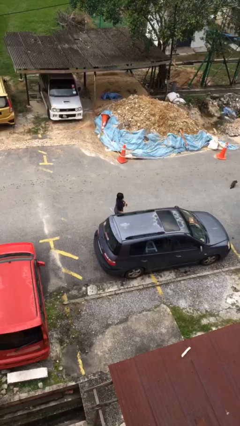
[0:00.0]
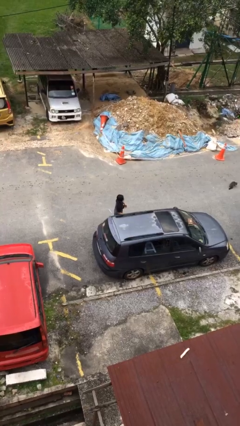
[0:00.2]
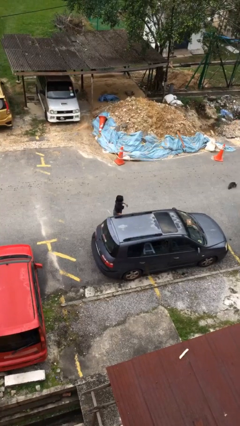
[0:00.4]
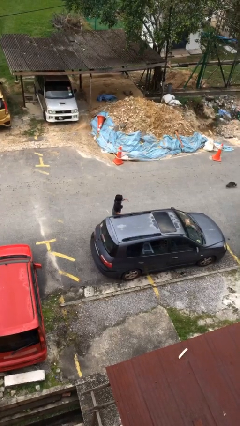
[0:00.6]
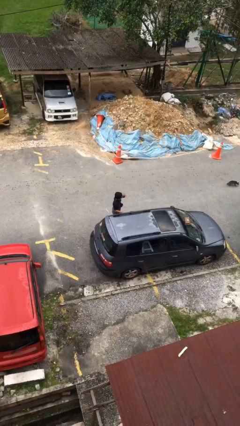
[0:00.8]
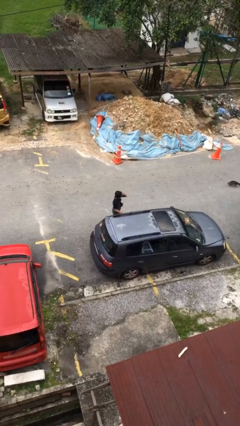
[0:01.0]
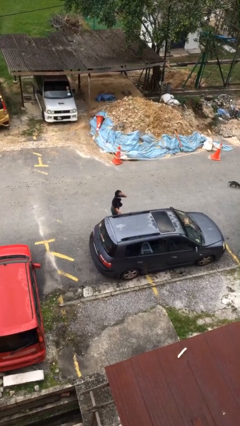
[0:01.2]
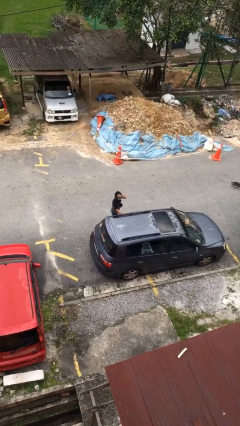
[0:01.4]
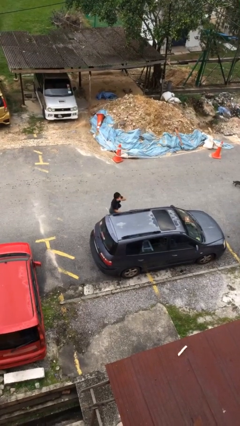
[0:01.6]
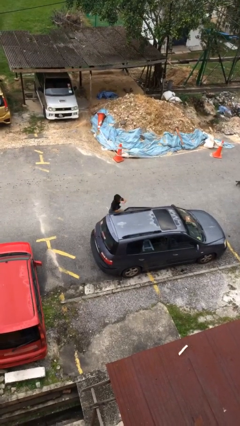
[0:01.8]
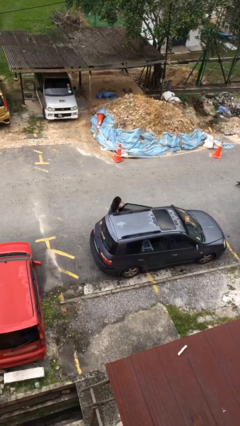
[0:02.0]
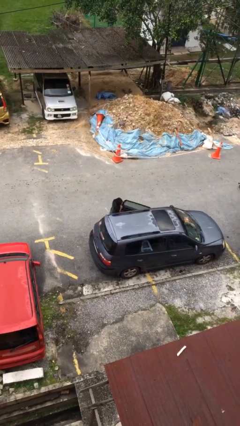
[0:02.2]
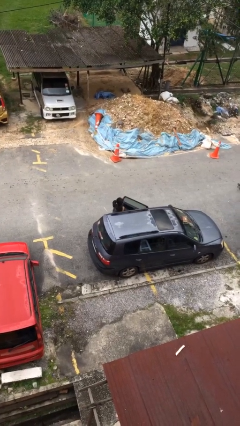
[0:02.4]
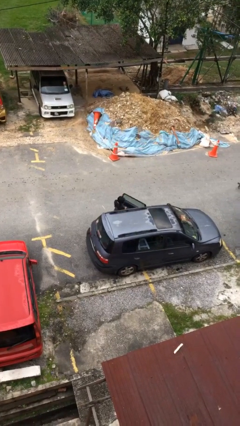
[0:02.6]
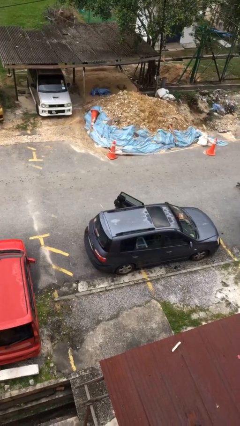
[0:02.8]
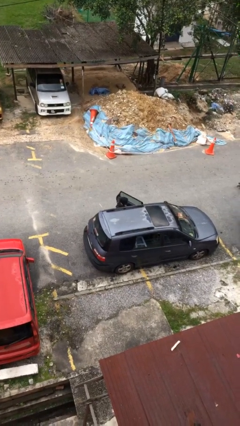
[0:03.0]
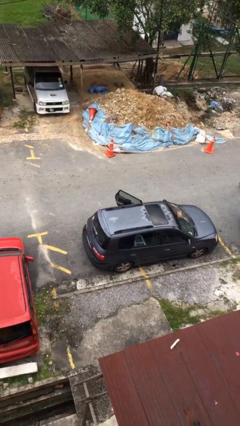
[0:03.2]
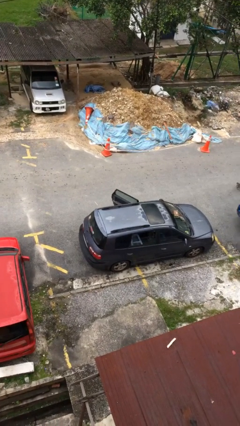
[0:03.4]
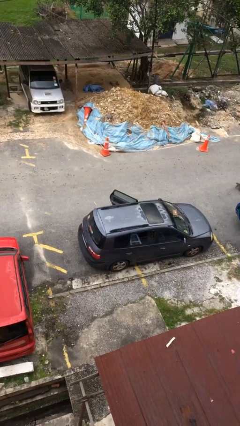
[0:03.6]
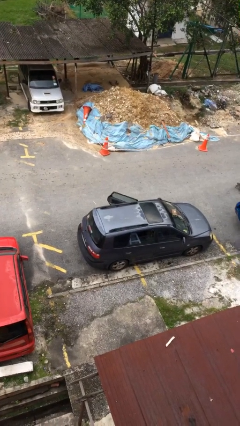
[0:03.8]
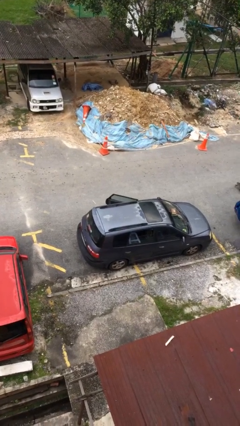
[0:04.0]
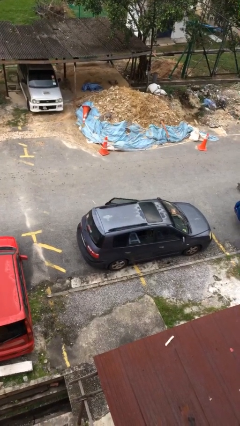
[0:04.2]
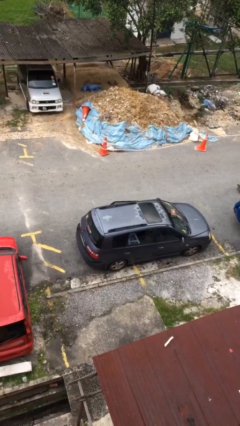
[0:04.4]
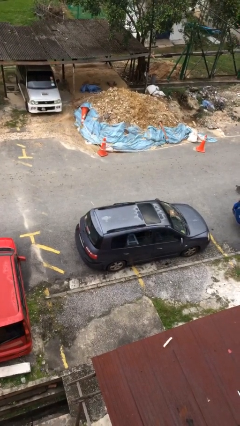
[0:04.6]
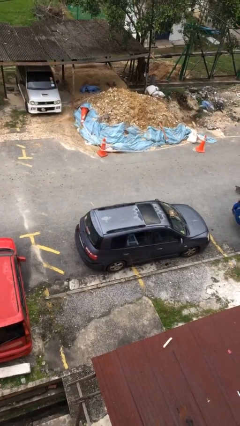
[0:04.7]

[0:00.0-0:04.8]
person enters car

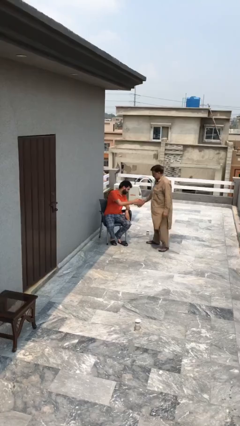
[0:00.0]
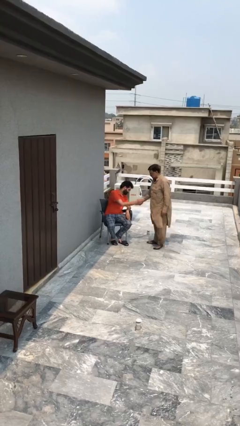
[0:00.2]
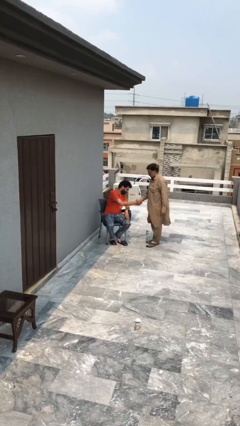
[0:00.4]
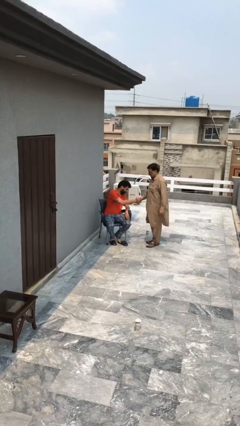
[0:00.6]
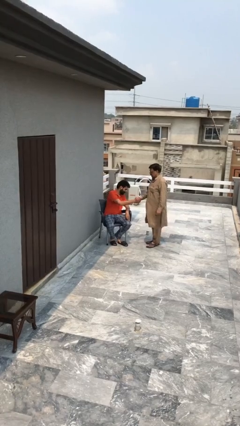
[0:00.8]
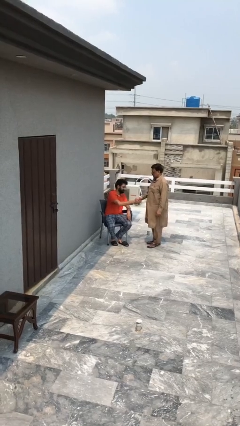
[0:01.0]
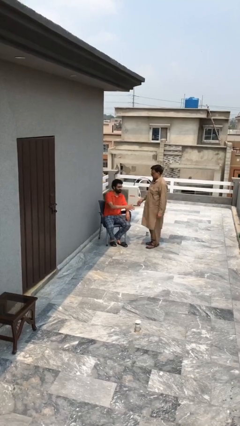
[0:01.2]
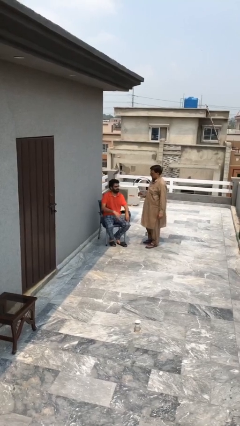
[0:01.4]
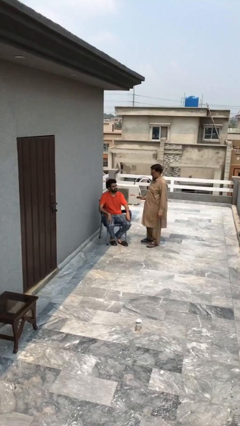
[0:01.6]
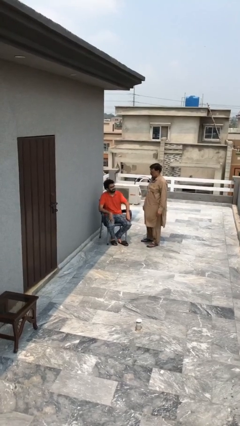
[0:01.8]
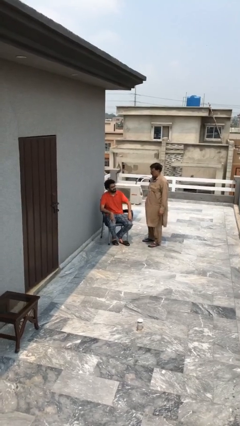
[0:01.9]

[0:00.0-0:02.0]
person shakes hand

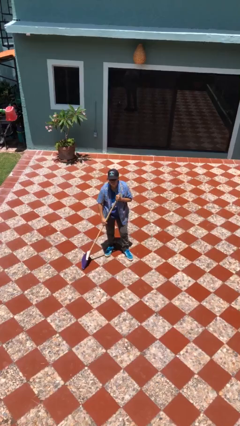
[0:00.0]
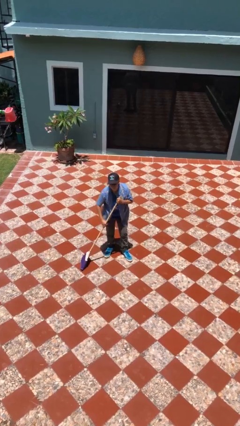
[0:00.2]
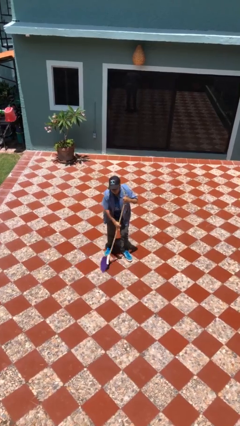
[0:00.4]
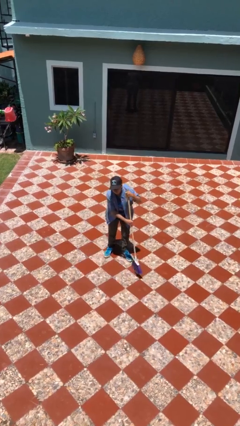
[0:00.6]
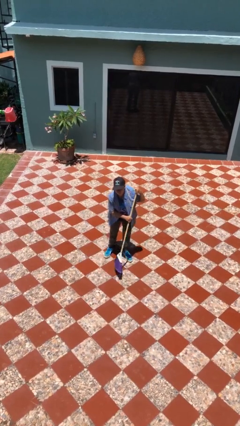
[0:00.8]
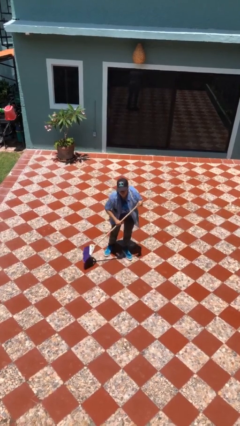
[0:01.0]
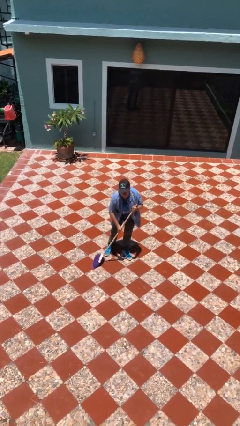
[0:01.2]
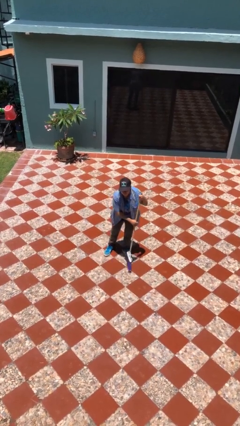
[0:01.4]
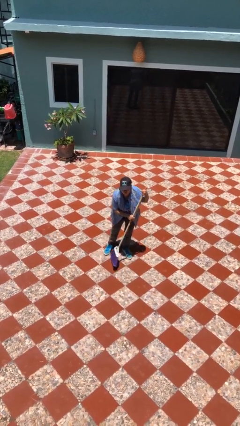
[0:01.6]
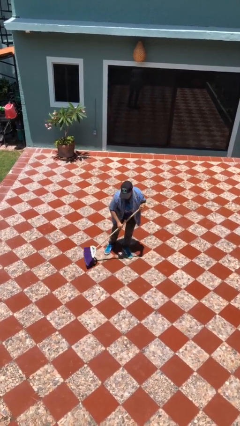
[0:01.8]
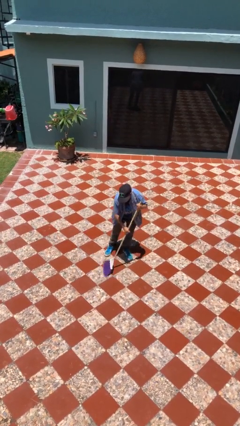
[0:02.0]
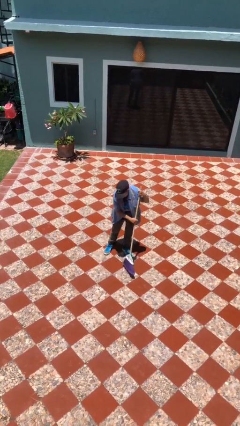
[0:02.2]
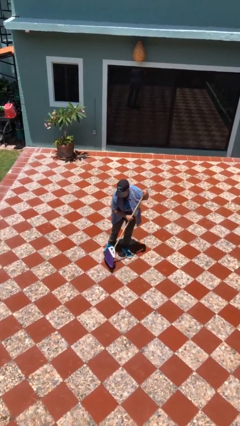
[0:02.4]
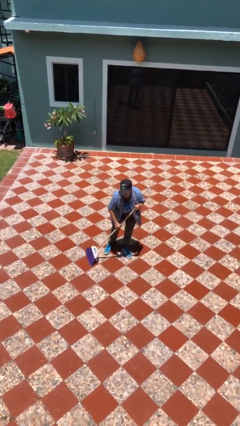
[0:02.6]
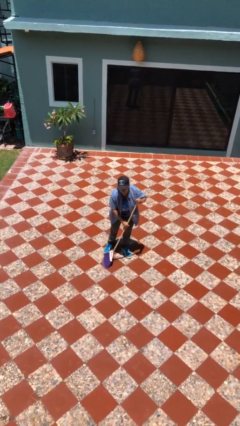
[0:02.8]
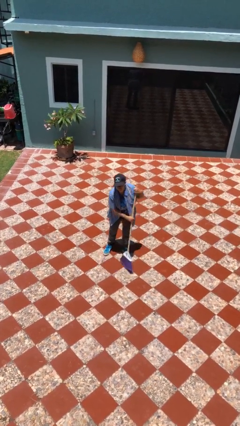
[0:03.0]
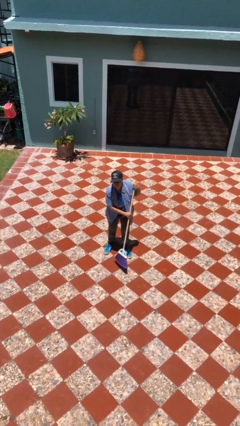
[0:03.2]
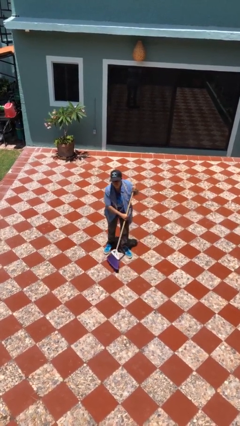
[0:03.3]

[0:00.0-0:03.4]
person sweeps floor

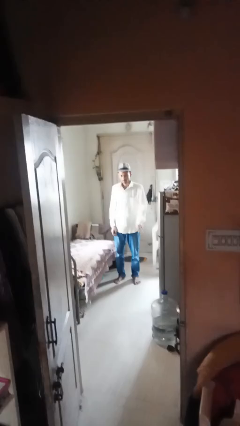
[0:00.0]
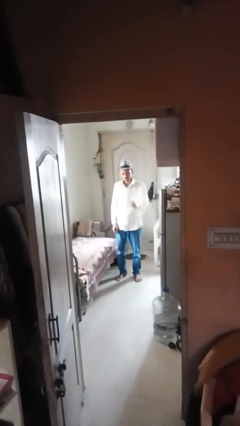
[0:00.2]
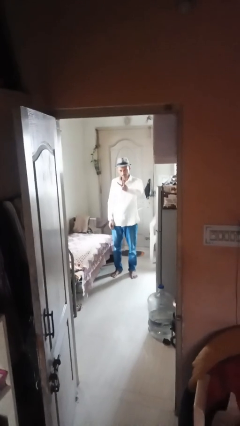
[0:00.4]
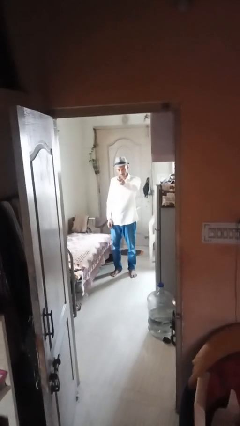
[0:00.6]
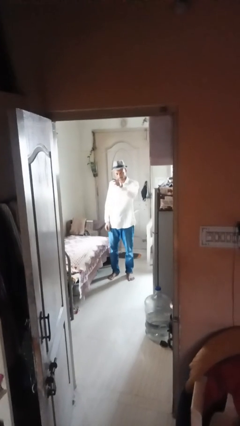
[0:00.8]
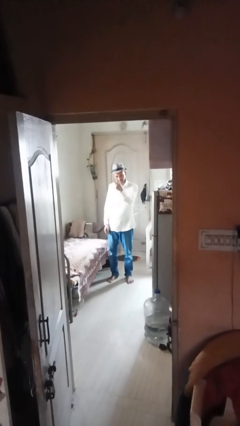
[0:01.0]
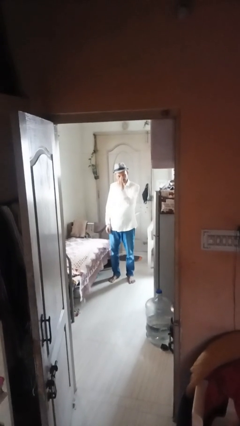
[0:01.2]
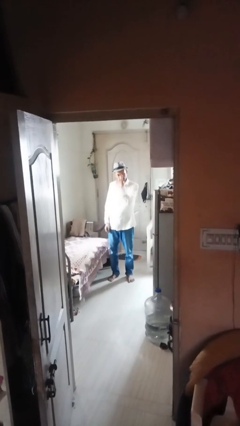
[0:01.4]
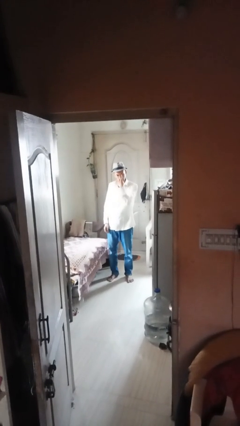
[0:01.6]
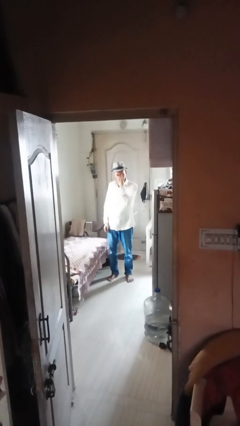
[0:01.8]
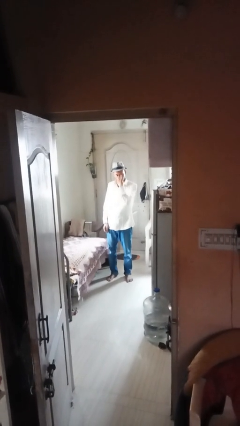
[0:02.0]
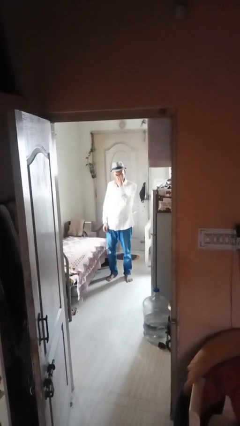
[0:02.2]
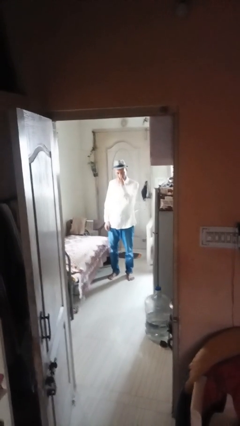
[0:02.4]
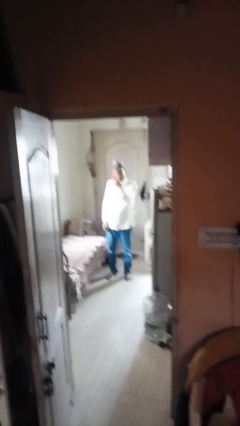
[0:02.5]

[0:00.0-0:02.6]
person gestures watch closely

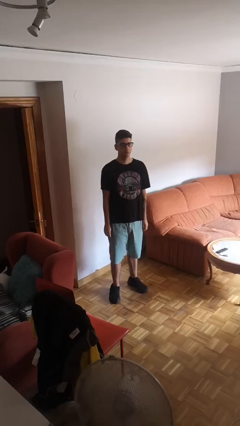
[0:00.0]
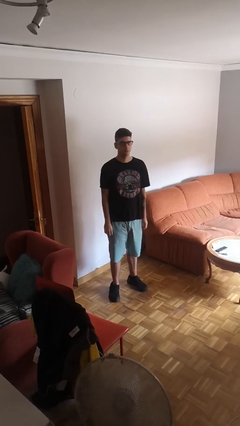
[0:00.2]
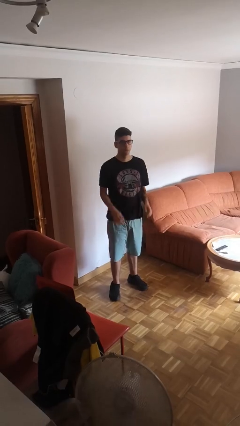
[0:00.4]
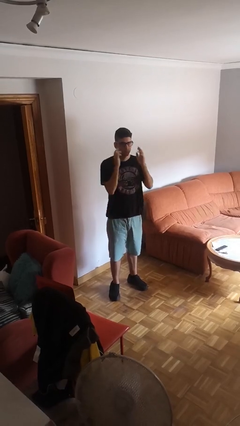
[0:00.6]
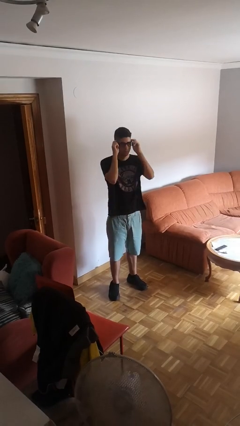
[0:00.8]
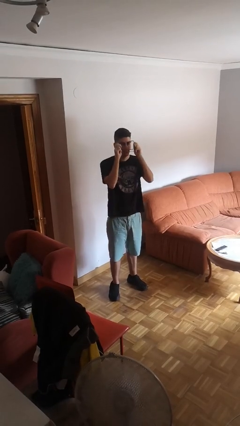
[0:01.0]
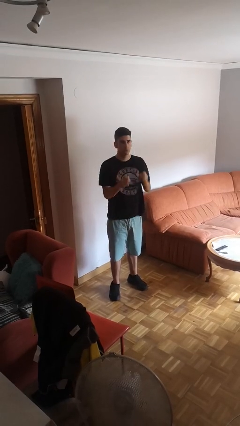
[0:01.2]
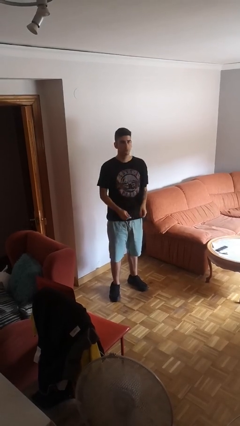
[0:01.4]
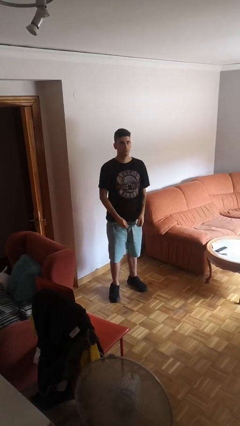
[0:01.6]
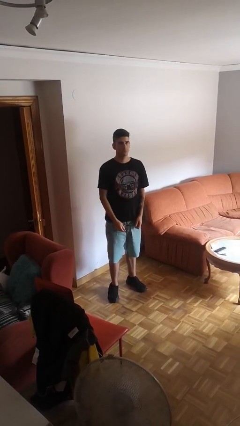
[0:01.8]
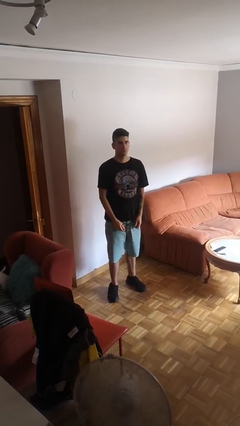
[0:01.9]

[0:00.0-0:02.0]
person takes off glasses

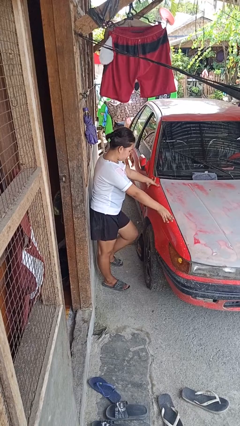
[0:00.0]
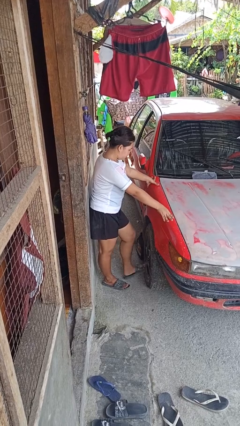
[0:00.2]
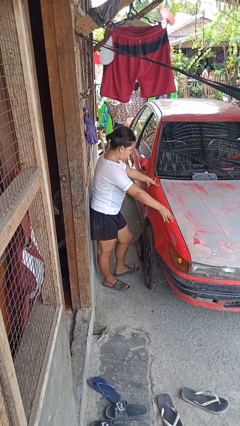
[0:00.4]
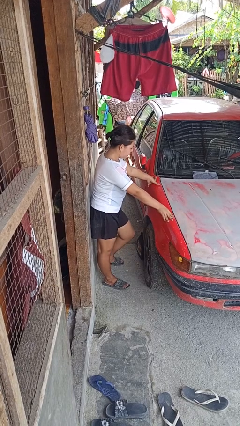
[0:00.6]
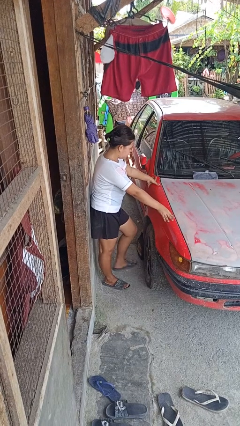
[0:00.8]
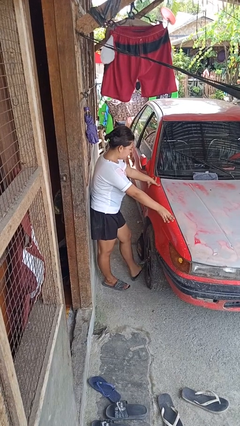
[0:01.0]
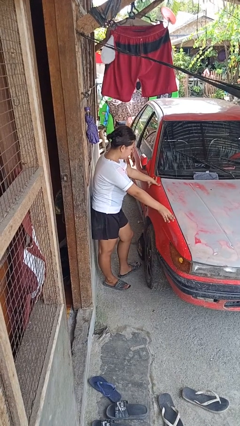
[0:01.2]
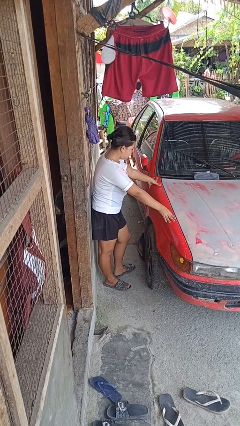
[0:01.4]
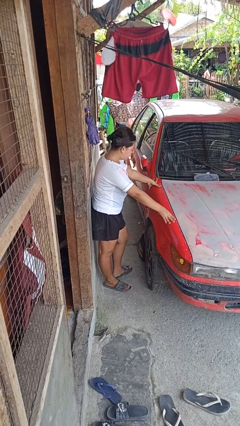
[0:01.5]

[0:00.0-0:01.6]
person kicks car tires

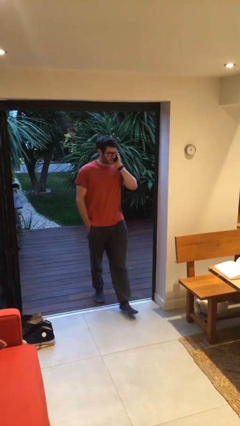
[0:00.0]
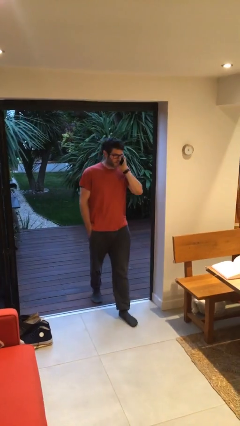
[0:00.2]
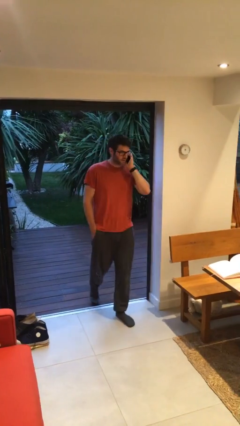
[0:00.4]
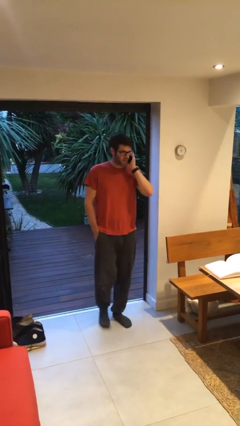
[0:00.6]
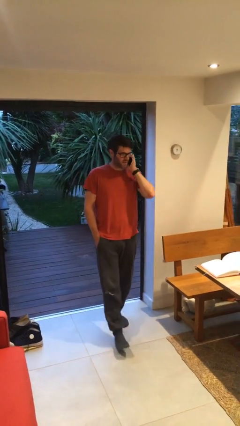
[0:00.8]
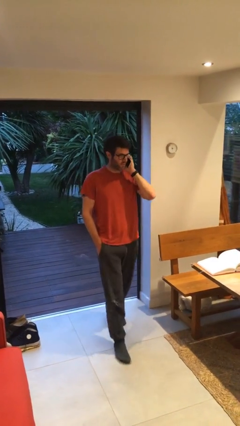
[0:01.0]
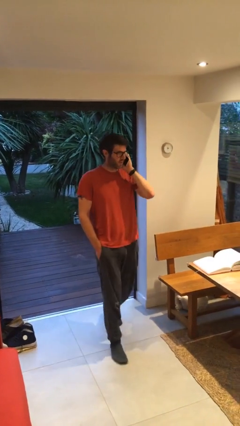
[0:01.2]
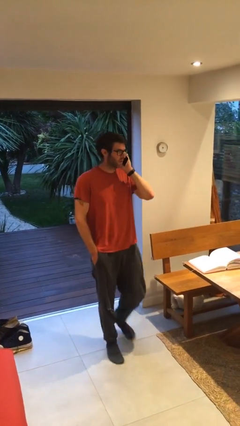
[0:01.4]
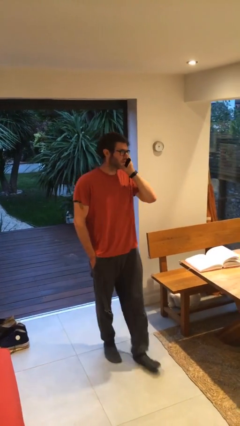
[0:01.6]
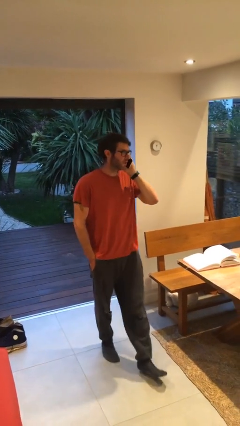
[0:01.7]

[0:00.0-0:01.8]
person enters scene through structure
